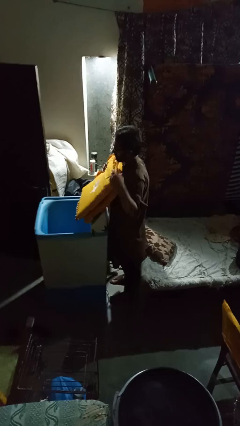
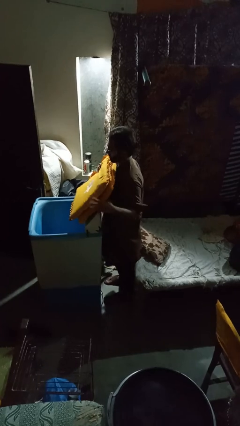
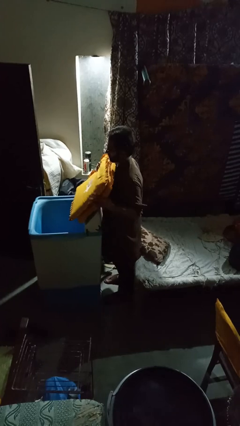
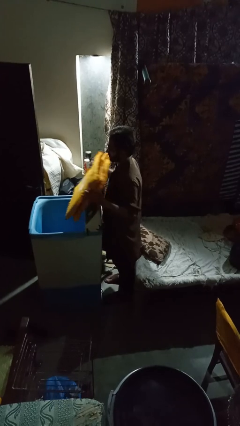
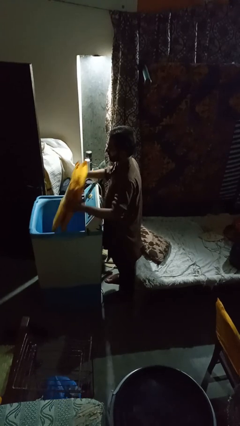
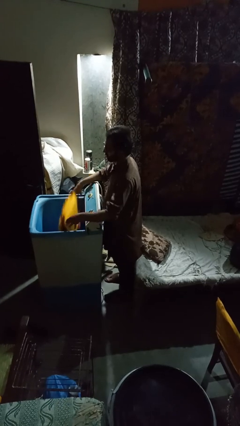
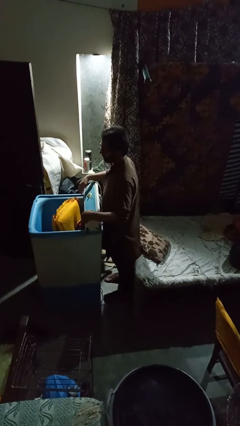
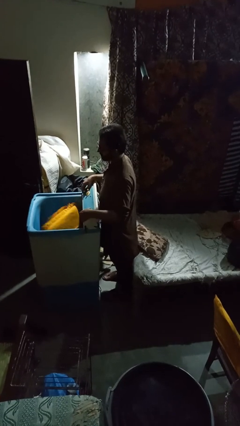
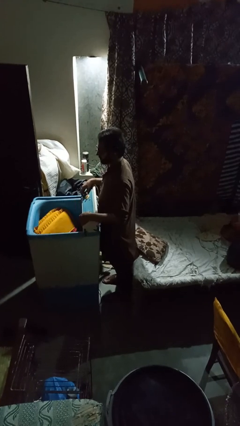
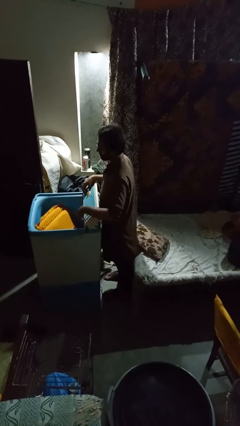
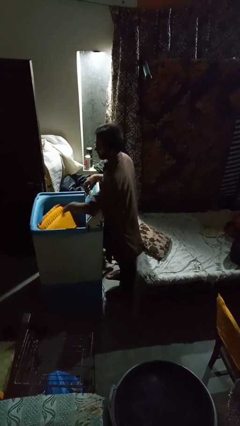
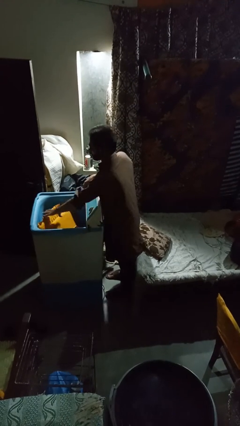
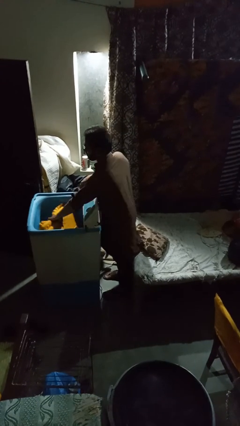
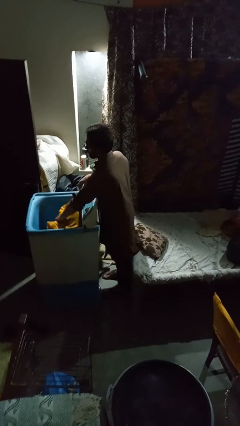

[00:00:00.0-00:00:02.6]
person loads clotheswasher

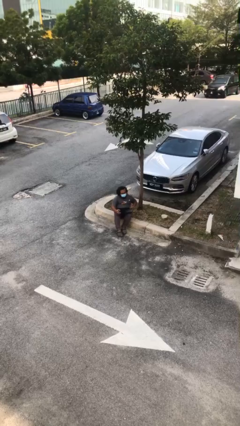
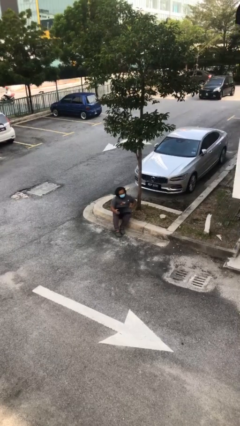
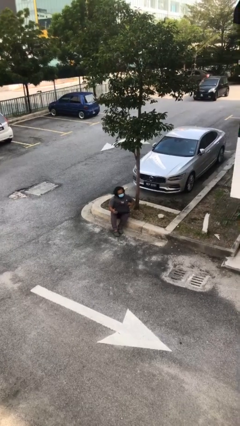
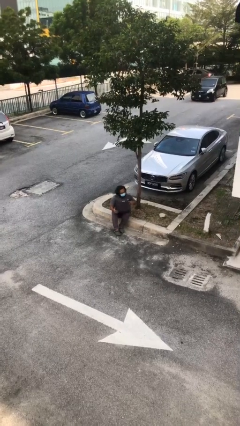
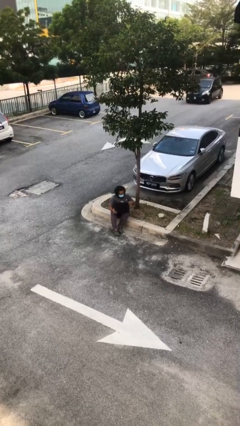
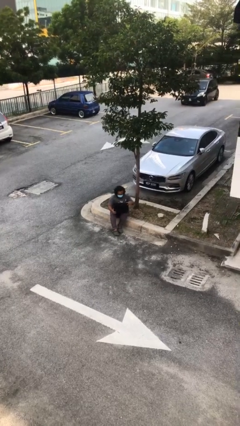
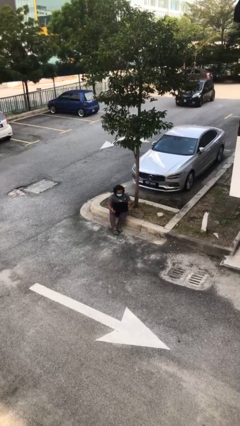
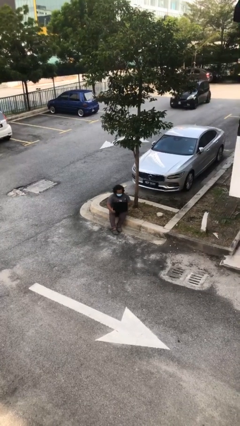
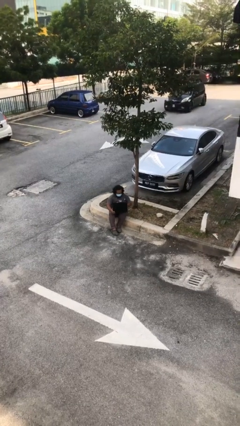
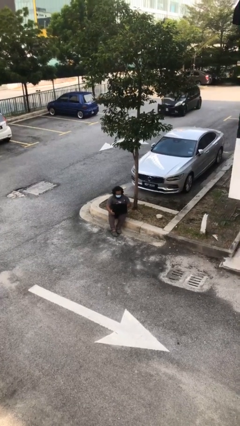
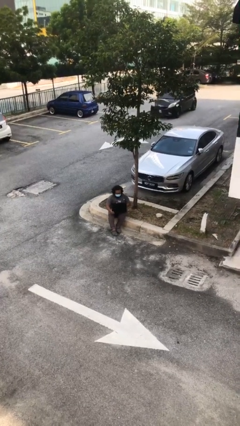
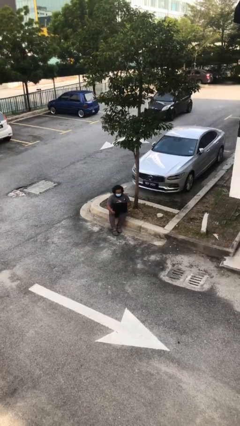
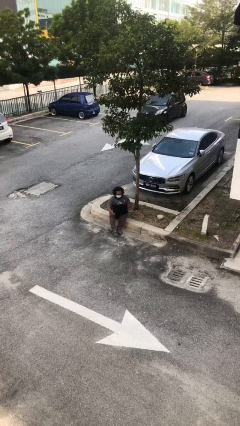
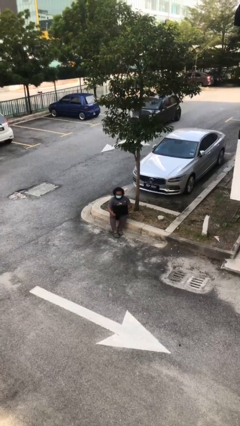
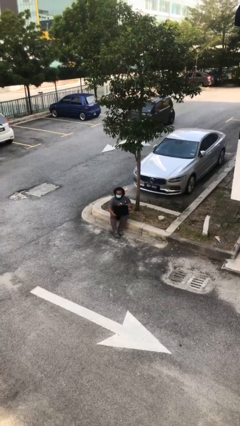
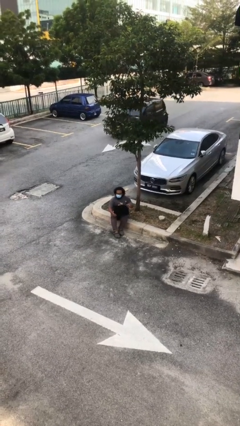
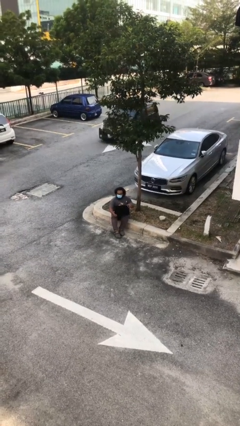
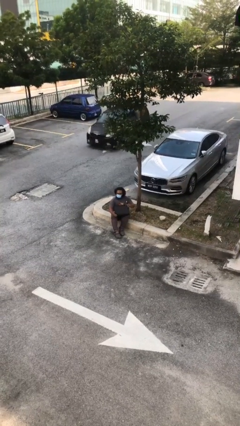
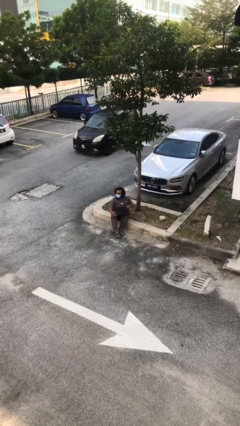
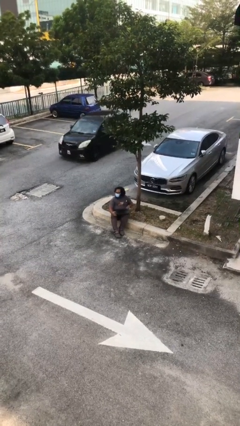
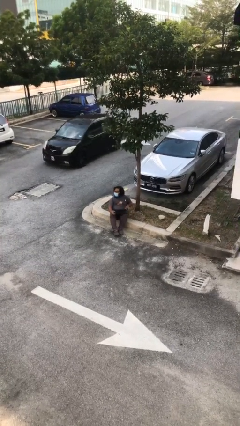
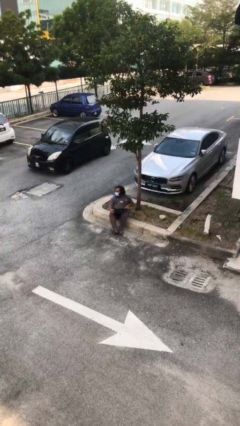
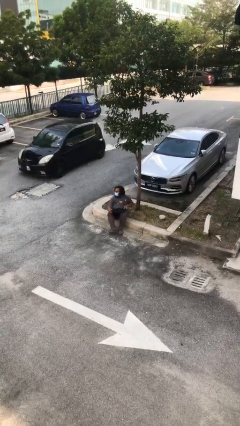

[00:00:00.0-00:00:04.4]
person interacts with laptop

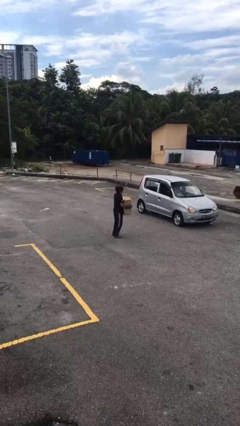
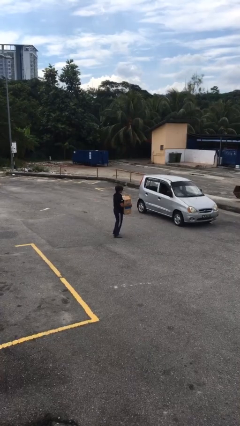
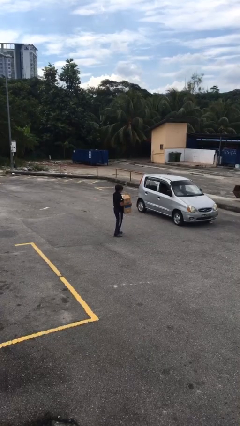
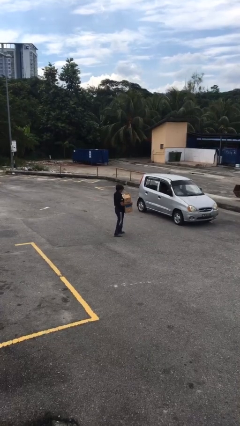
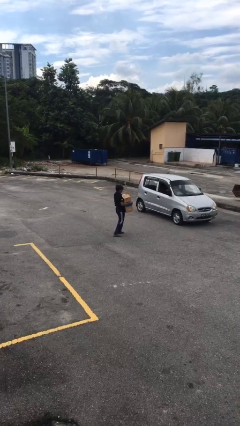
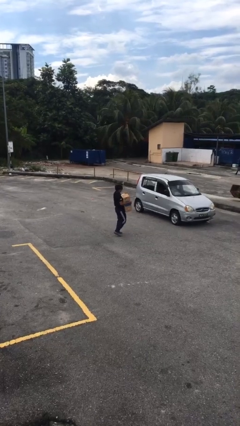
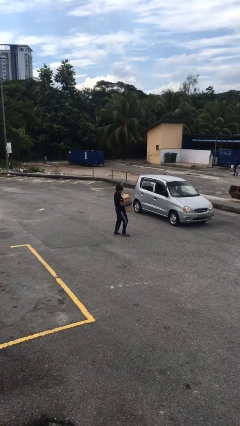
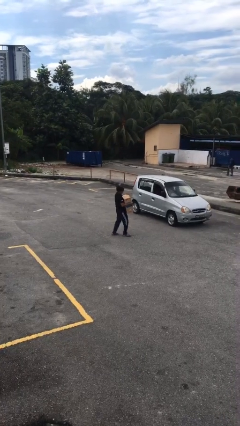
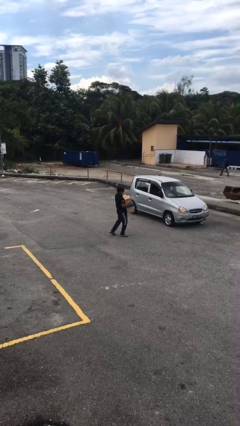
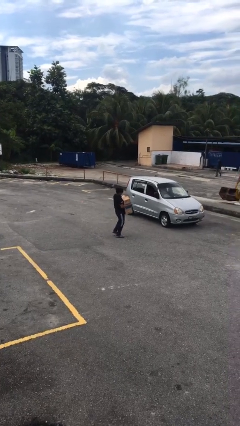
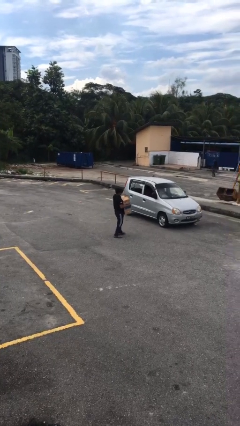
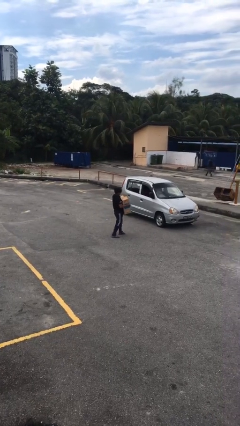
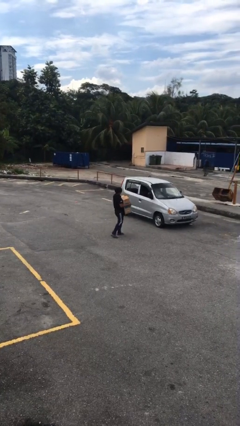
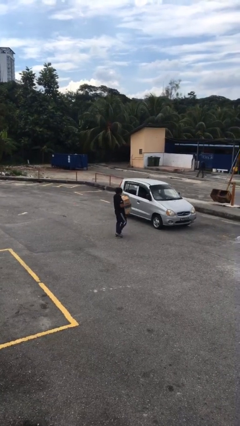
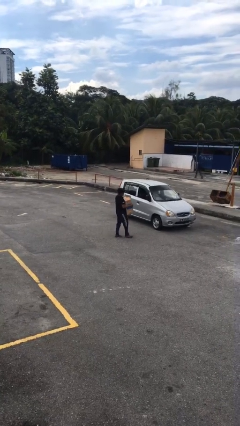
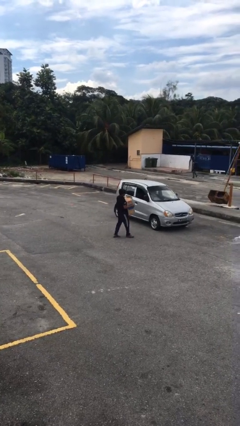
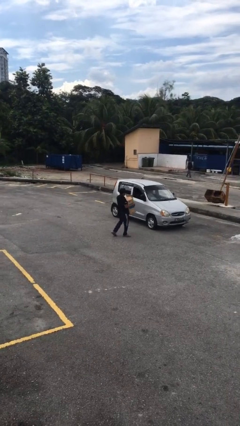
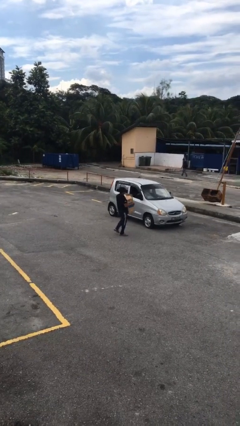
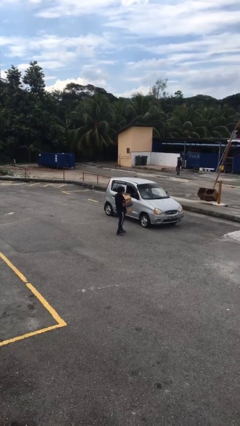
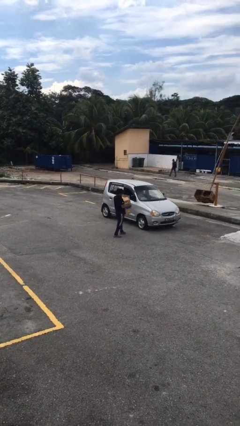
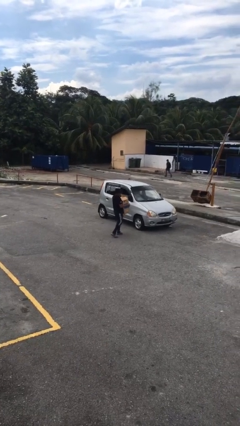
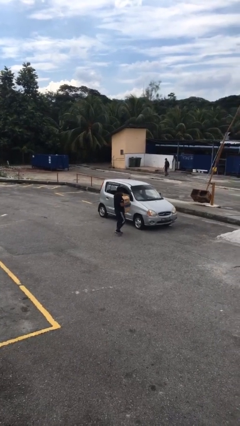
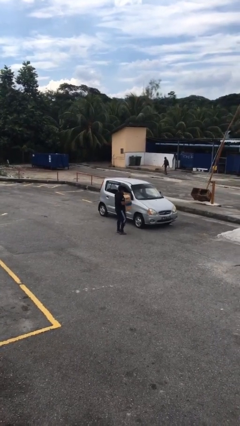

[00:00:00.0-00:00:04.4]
person carries heavy object

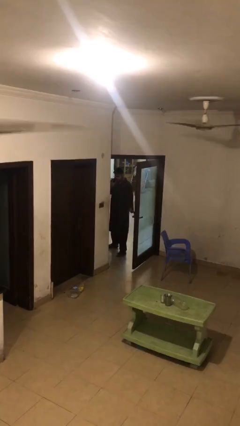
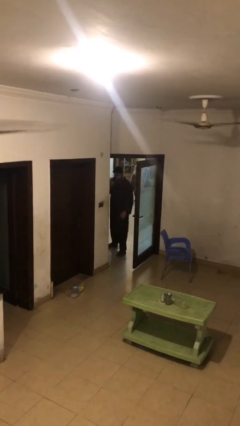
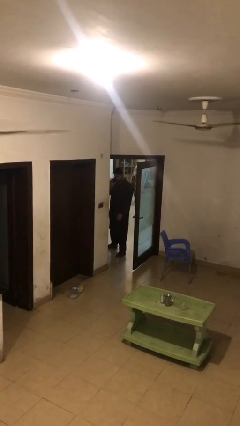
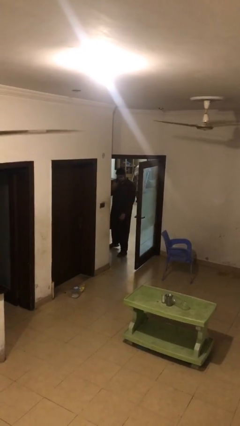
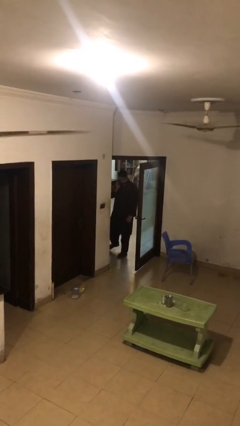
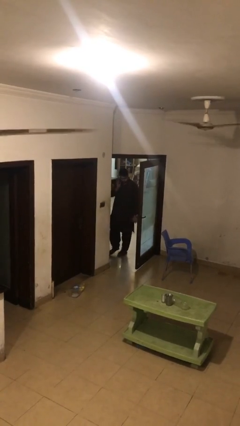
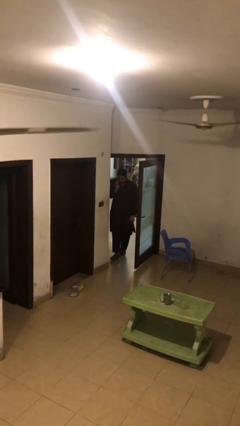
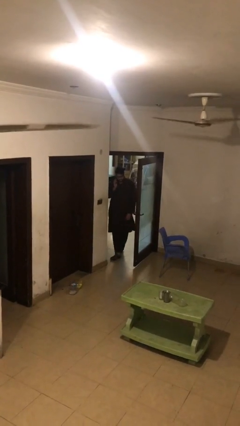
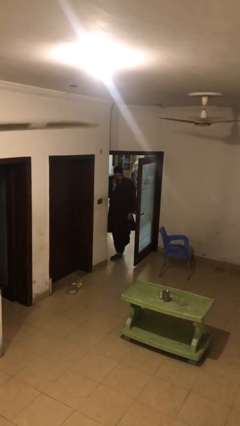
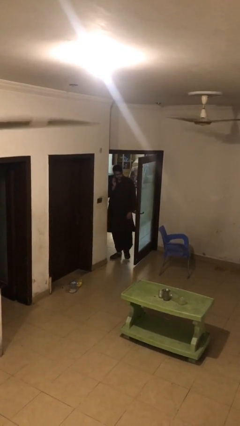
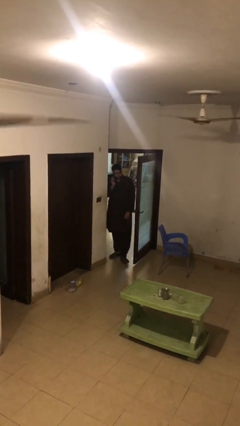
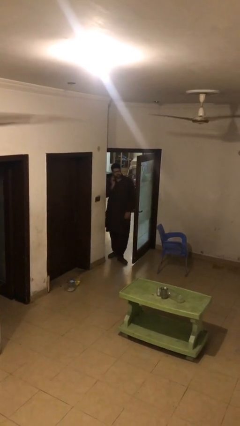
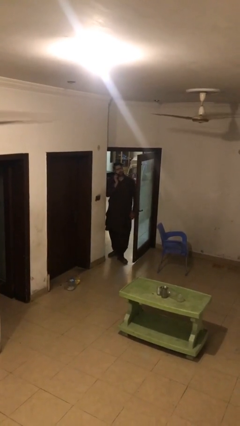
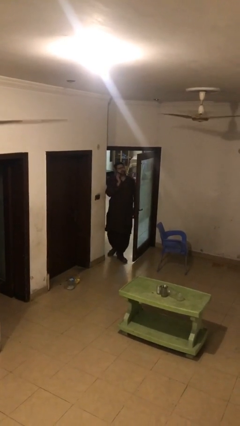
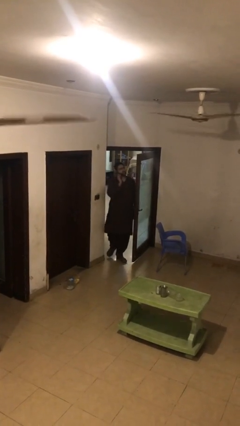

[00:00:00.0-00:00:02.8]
person enters scene through structure

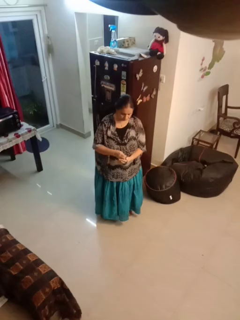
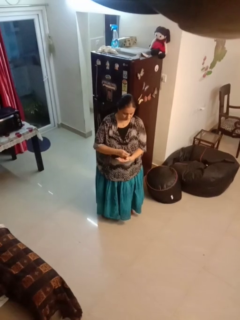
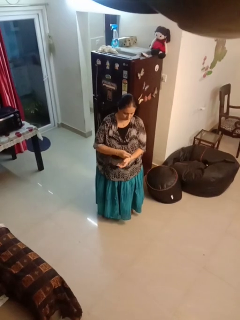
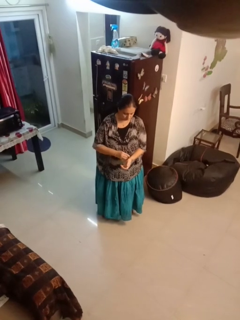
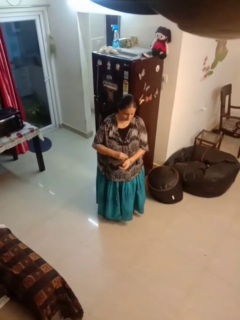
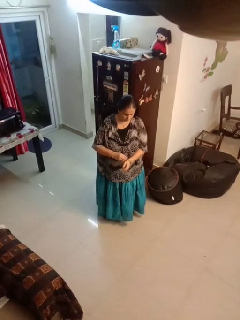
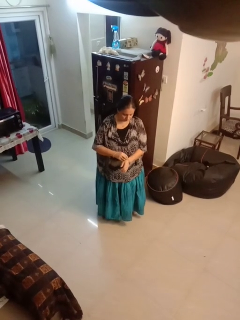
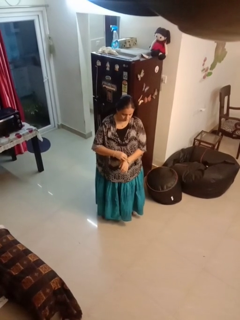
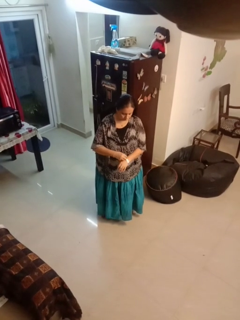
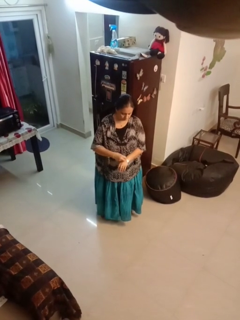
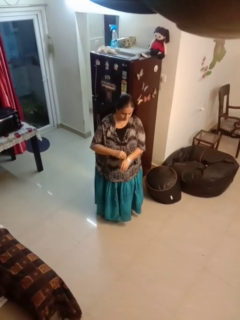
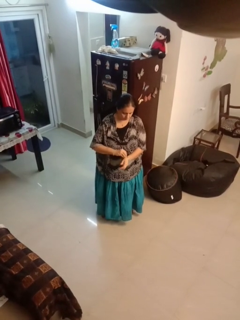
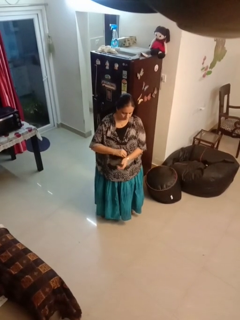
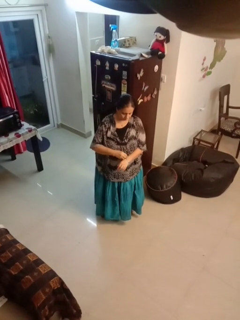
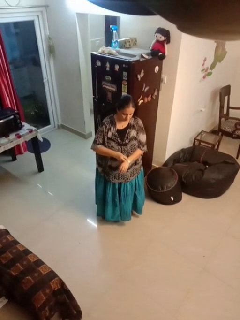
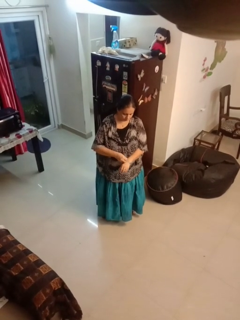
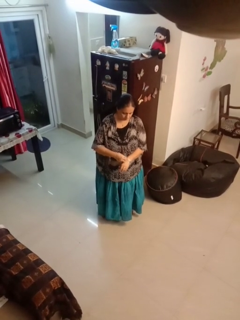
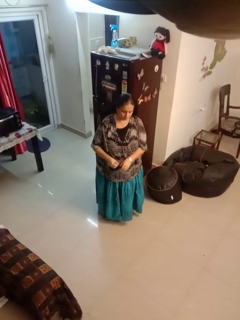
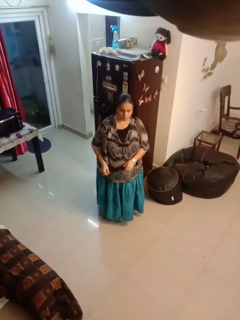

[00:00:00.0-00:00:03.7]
person puts on wristwatch

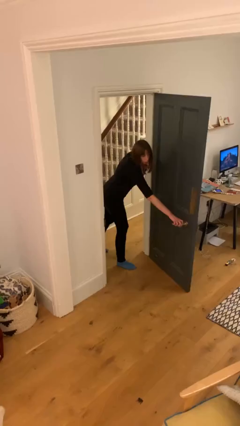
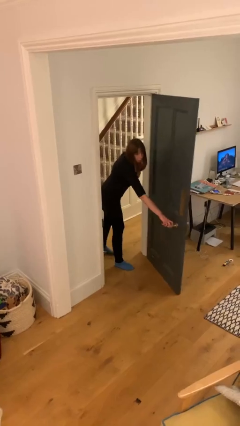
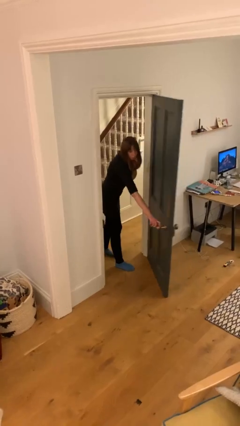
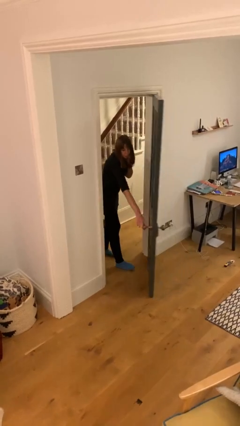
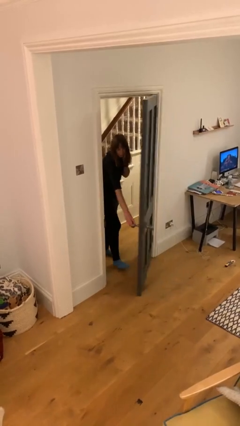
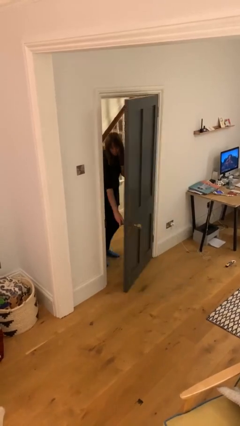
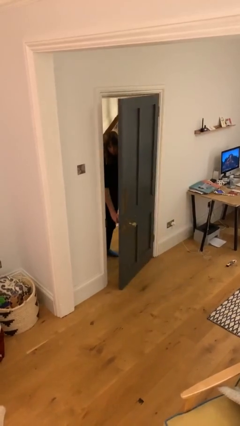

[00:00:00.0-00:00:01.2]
person closes facility door
